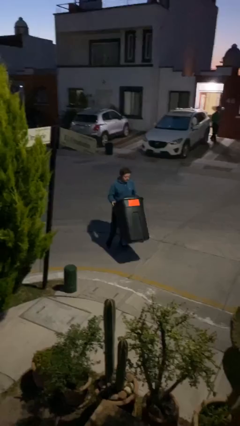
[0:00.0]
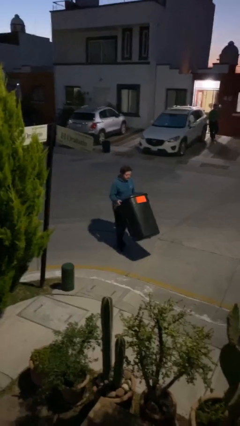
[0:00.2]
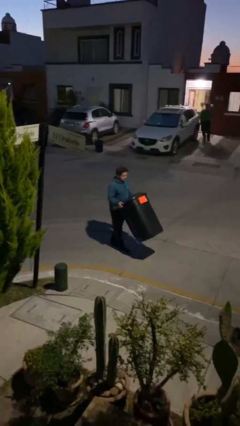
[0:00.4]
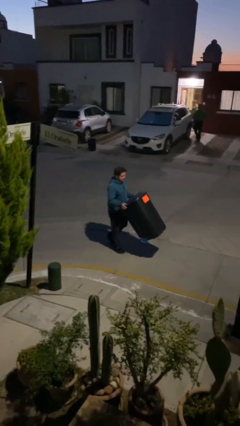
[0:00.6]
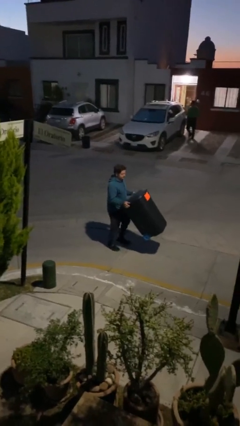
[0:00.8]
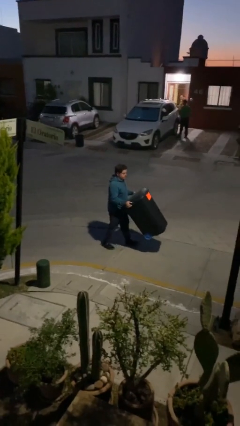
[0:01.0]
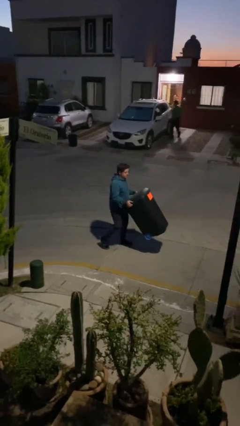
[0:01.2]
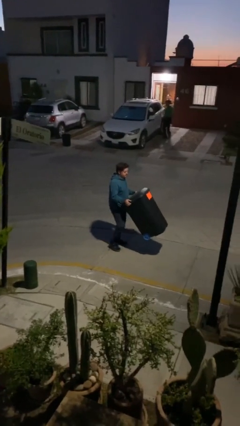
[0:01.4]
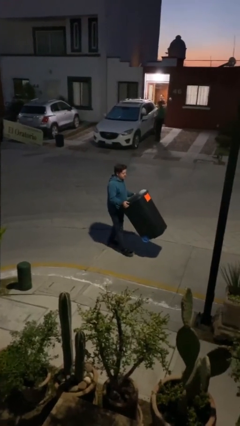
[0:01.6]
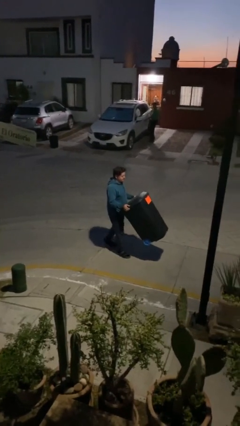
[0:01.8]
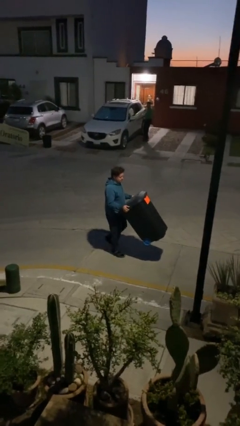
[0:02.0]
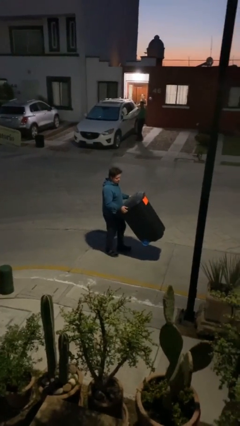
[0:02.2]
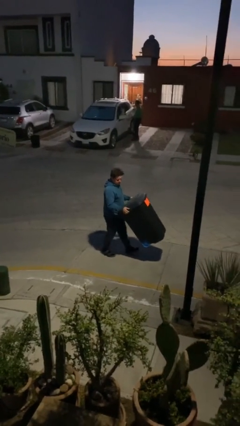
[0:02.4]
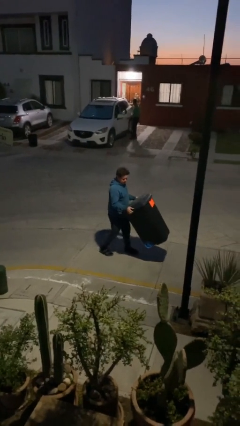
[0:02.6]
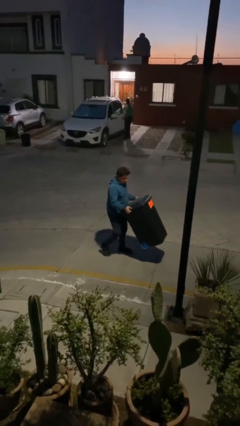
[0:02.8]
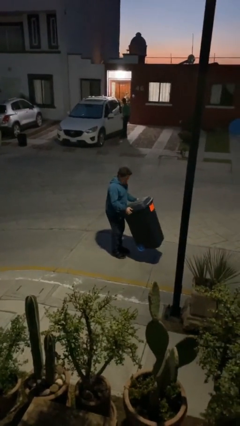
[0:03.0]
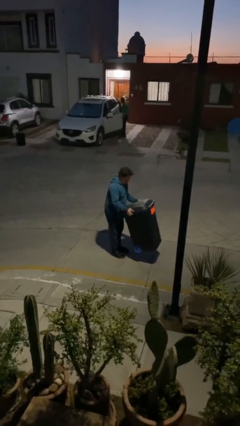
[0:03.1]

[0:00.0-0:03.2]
person carries heavy object

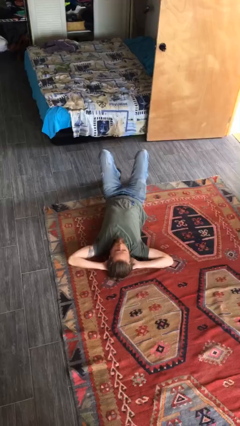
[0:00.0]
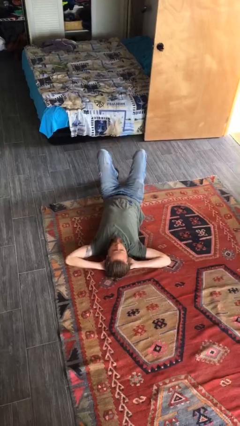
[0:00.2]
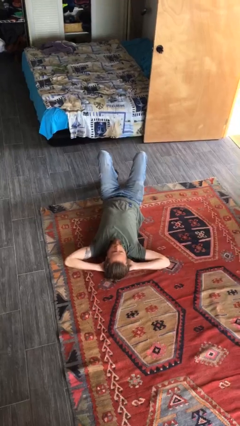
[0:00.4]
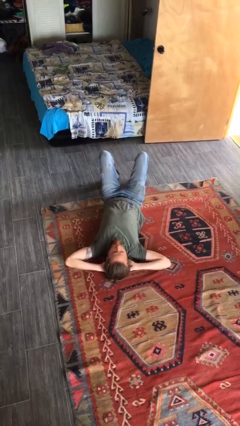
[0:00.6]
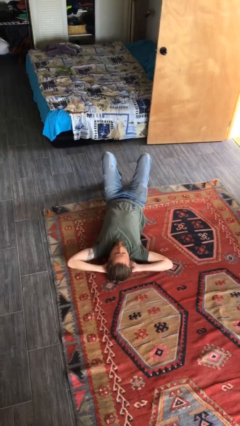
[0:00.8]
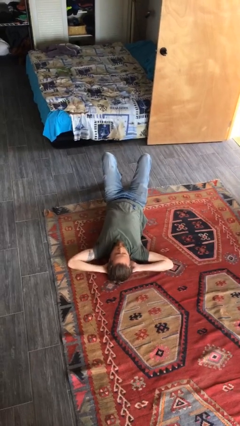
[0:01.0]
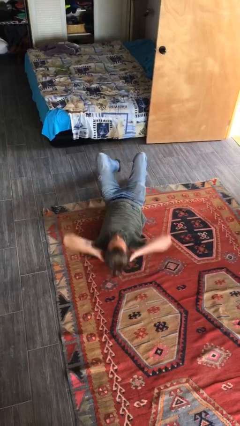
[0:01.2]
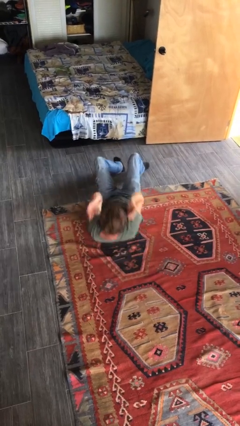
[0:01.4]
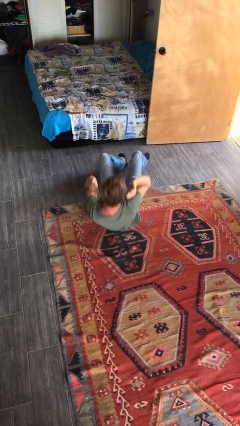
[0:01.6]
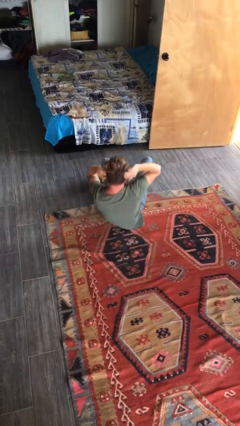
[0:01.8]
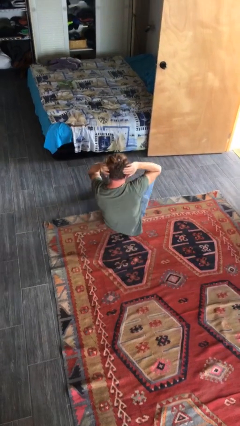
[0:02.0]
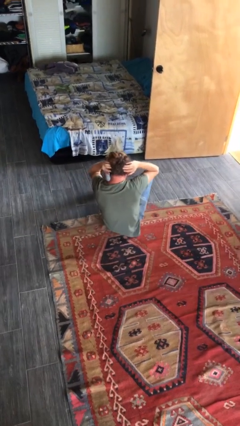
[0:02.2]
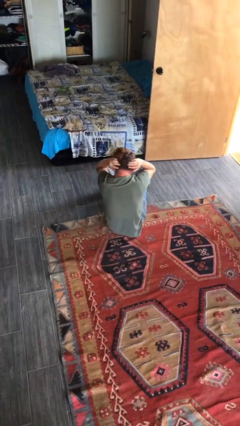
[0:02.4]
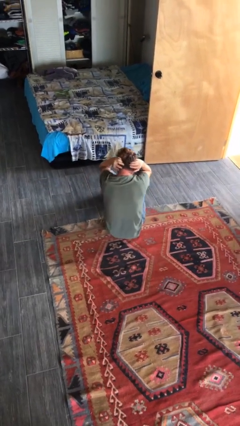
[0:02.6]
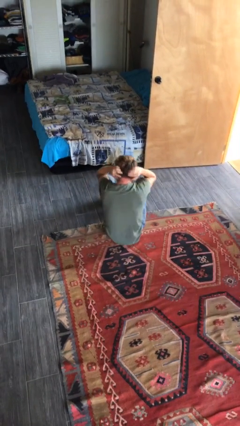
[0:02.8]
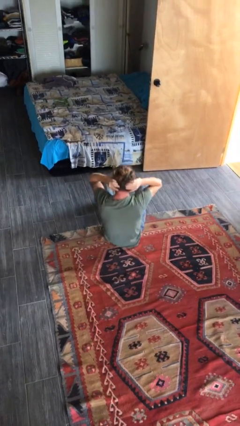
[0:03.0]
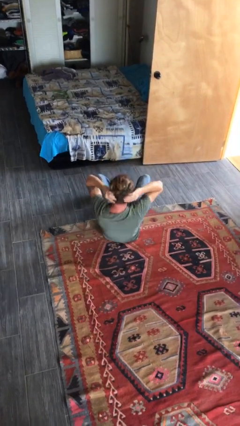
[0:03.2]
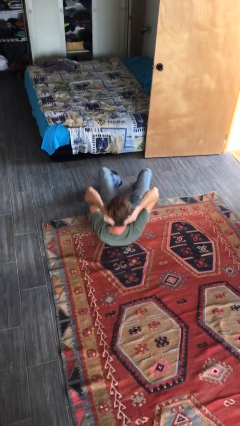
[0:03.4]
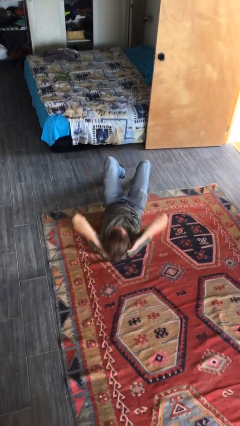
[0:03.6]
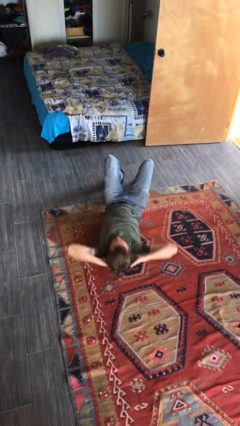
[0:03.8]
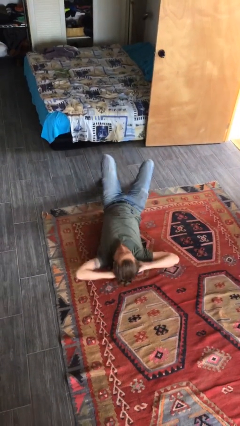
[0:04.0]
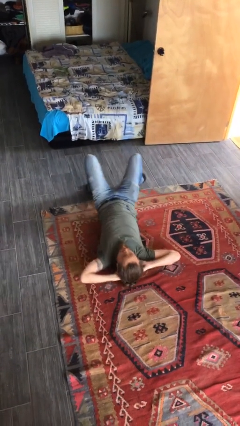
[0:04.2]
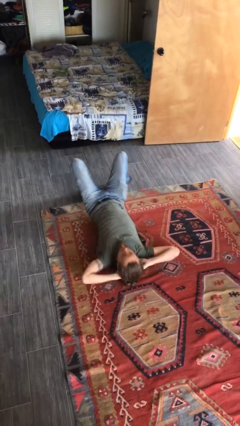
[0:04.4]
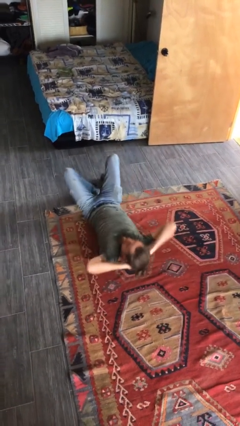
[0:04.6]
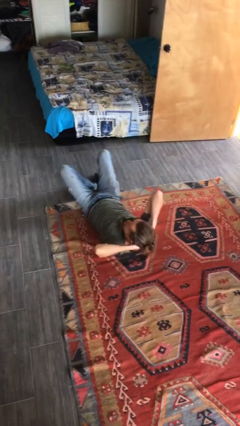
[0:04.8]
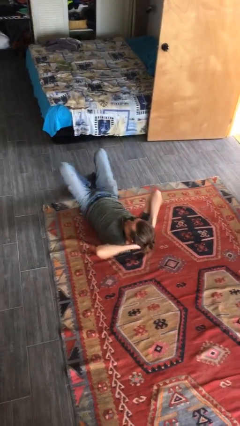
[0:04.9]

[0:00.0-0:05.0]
person exercises with situp

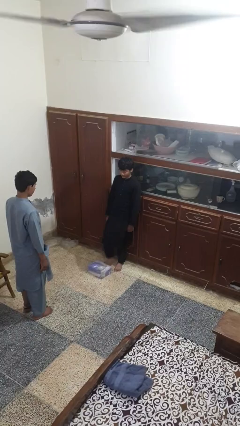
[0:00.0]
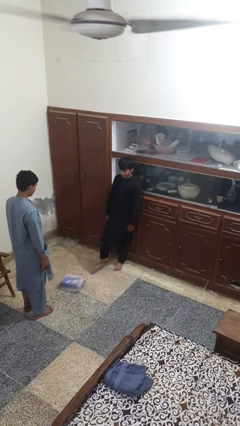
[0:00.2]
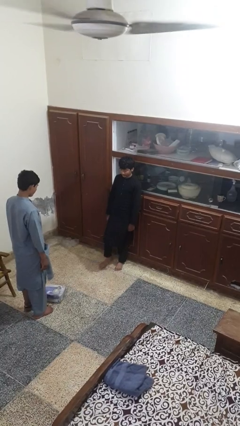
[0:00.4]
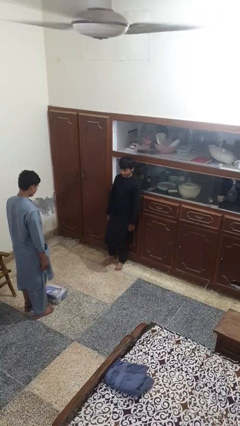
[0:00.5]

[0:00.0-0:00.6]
person kicks object to person

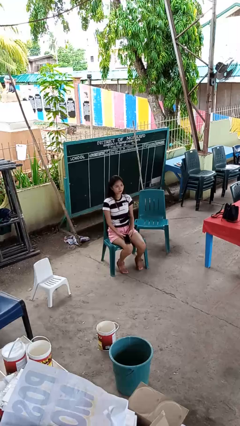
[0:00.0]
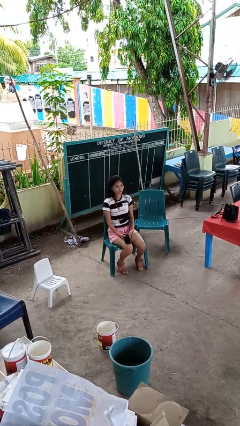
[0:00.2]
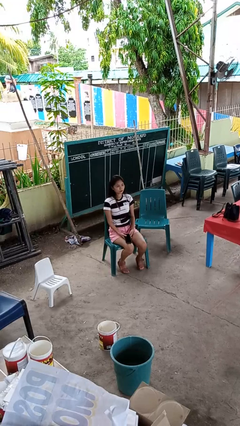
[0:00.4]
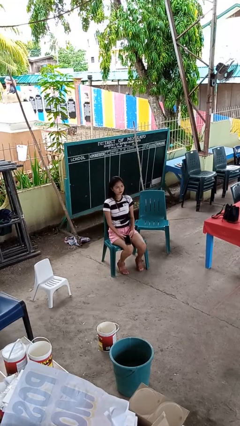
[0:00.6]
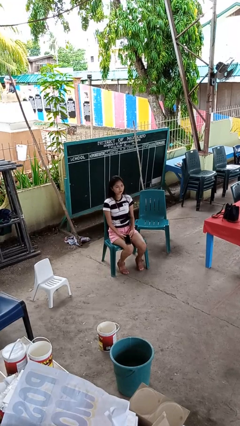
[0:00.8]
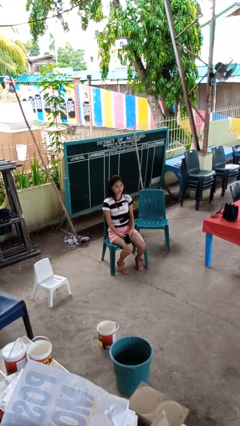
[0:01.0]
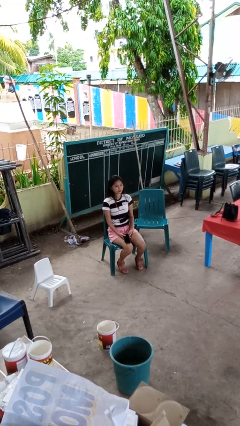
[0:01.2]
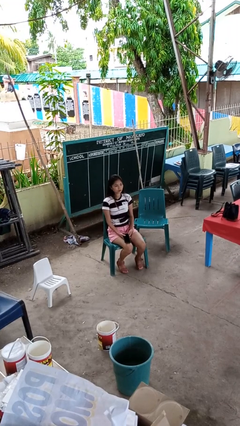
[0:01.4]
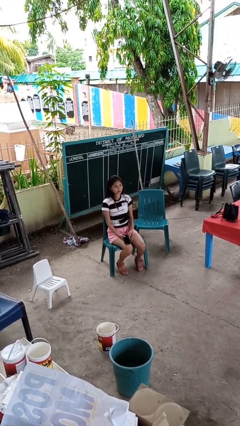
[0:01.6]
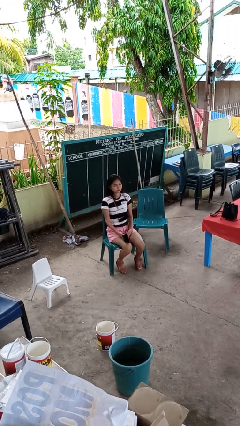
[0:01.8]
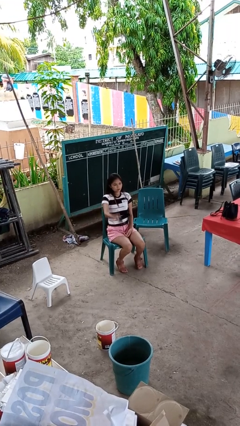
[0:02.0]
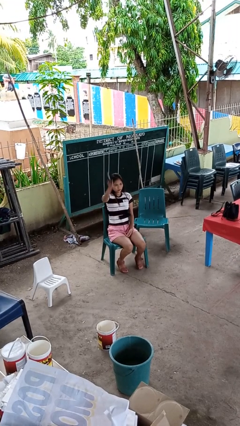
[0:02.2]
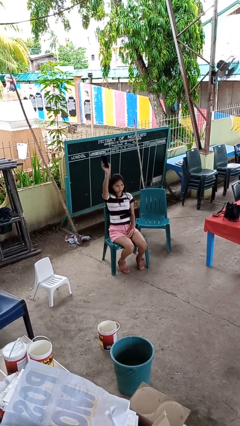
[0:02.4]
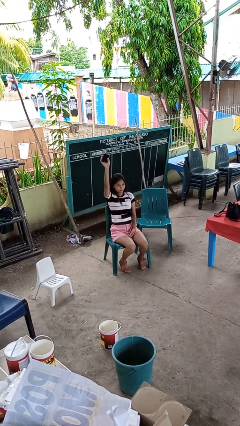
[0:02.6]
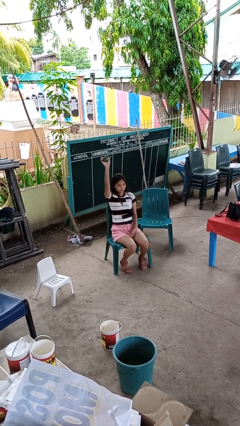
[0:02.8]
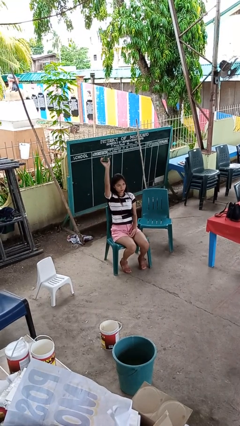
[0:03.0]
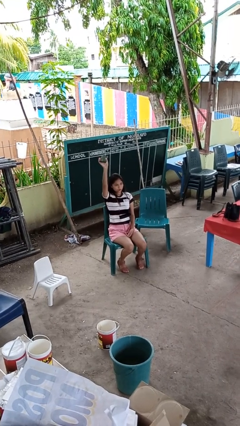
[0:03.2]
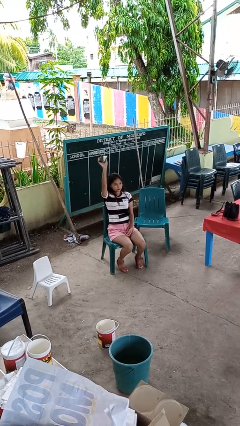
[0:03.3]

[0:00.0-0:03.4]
person holds object above head

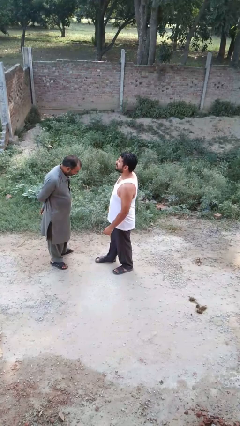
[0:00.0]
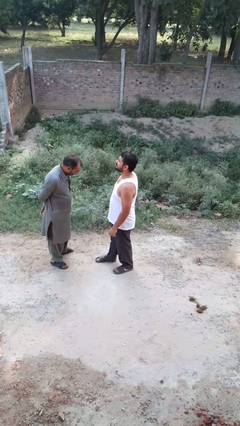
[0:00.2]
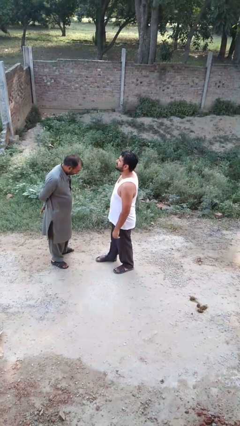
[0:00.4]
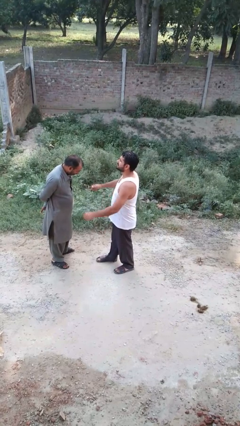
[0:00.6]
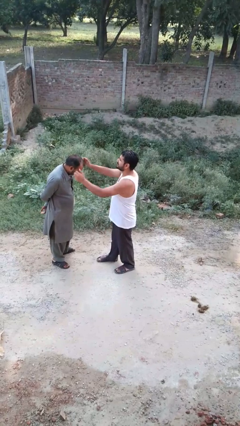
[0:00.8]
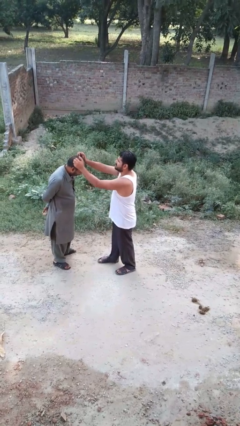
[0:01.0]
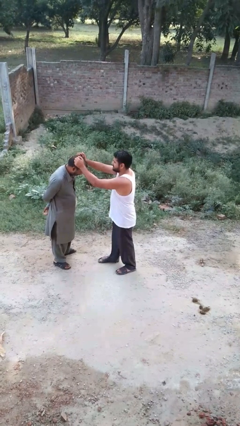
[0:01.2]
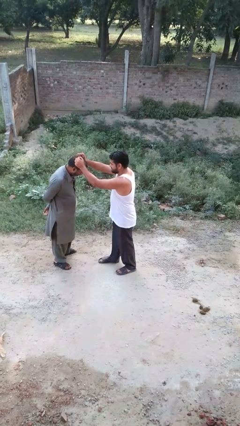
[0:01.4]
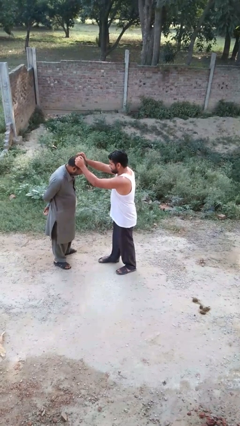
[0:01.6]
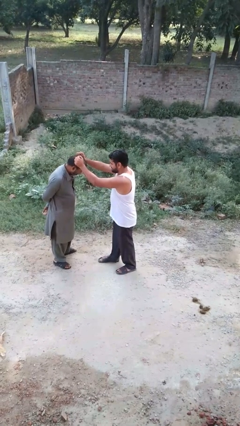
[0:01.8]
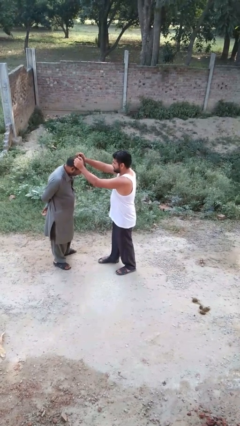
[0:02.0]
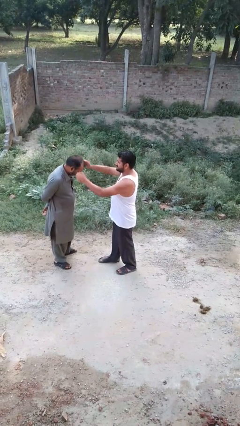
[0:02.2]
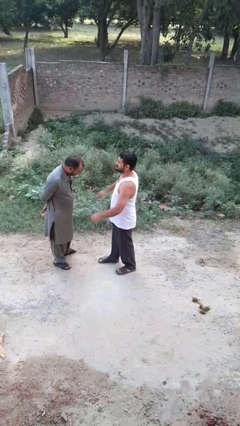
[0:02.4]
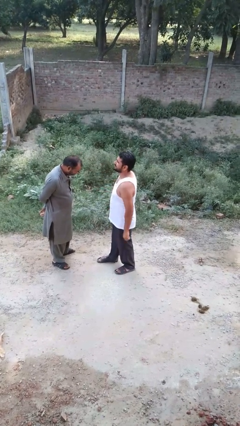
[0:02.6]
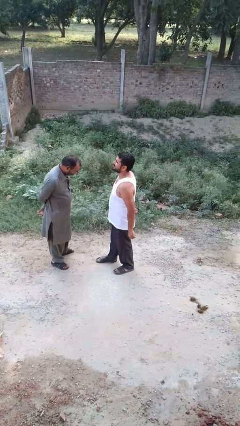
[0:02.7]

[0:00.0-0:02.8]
person grabs person by hair

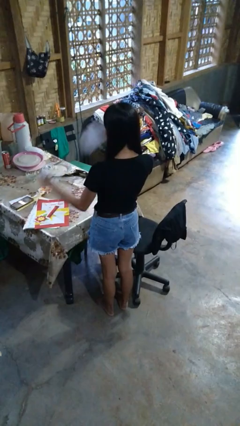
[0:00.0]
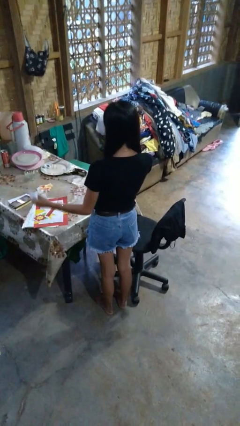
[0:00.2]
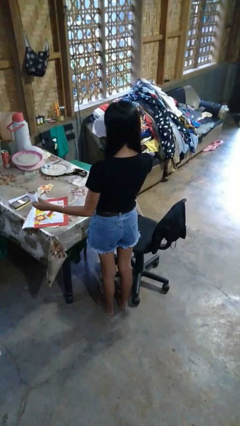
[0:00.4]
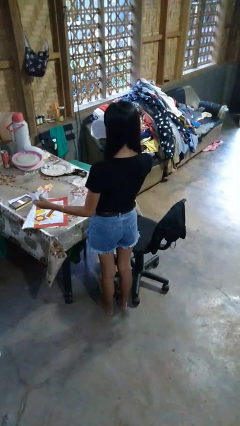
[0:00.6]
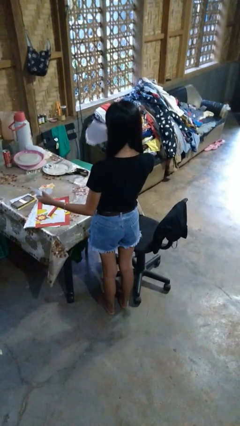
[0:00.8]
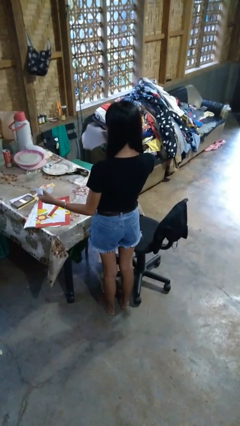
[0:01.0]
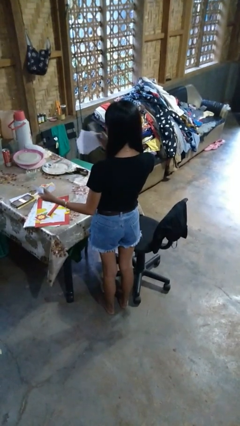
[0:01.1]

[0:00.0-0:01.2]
person tears paper

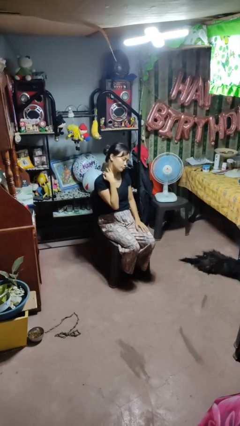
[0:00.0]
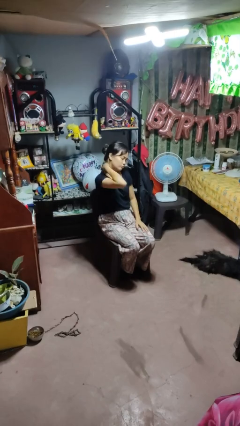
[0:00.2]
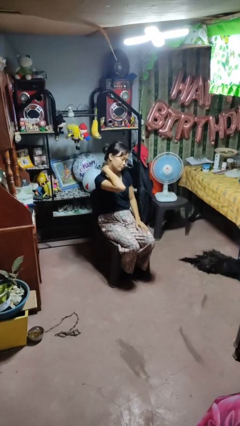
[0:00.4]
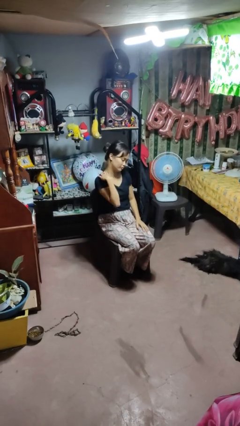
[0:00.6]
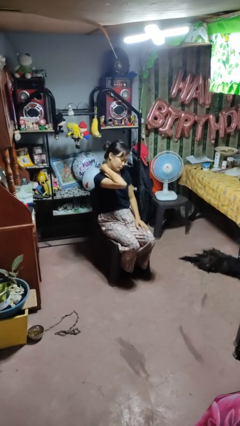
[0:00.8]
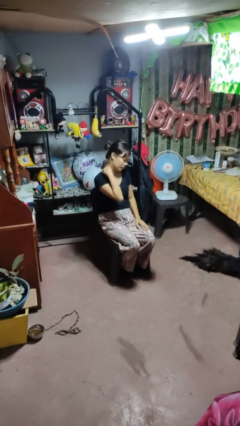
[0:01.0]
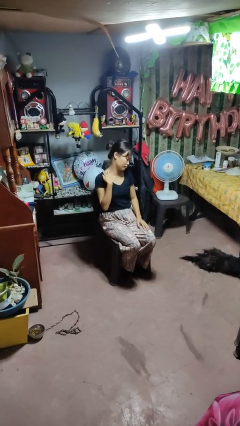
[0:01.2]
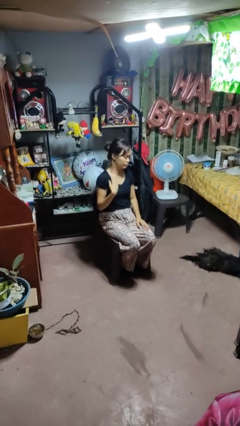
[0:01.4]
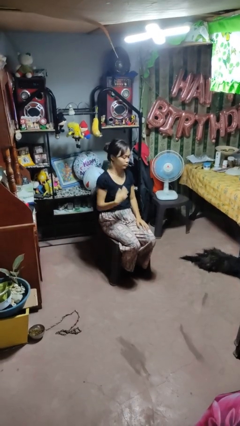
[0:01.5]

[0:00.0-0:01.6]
person rubs neck
